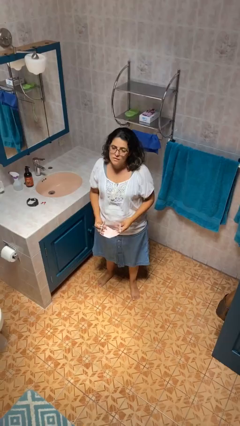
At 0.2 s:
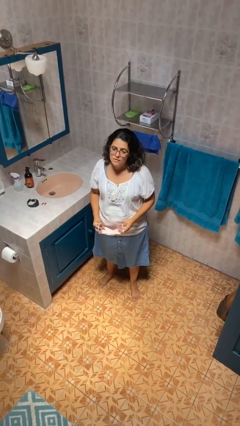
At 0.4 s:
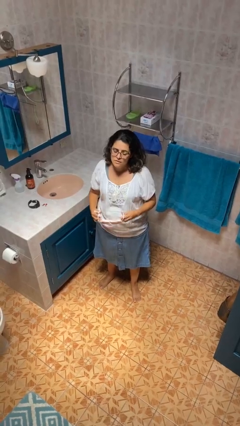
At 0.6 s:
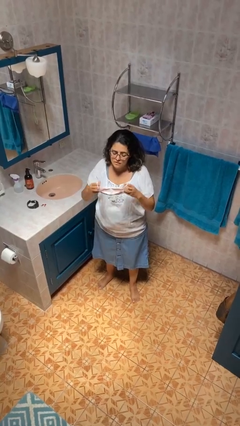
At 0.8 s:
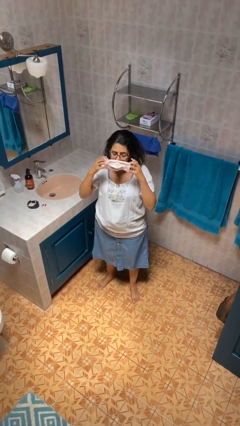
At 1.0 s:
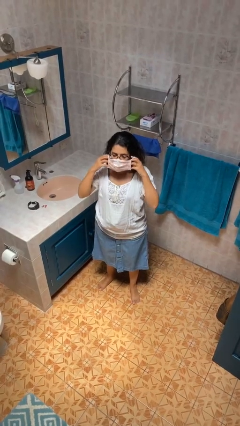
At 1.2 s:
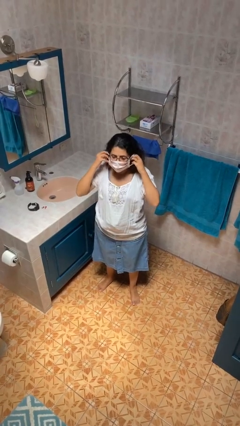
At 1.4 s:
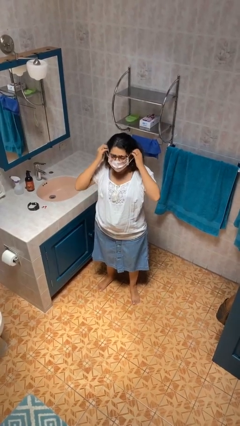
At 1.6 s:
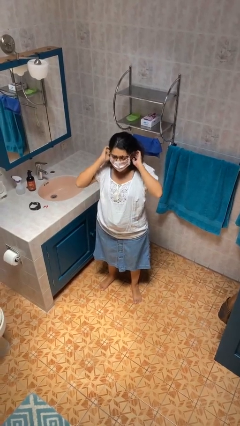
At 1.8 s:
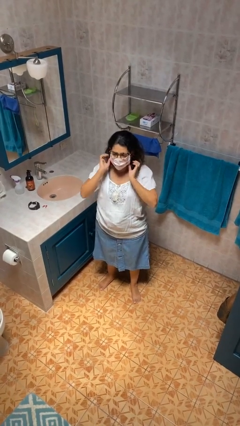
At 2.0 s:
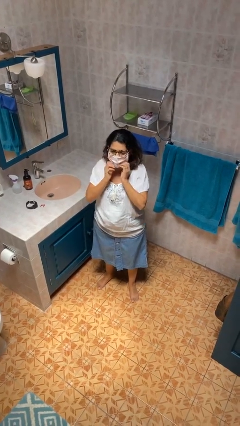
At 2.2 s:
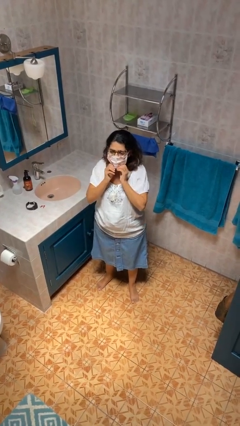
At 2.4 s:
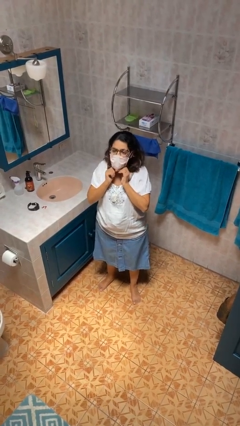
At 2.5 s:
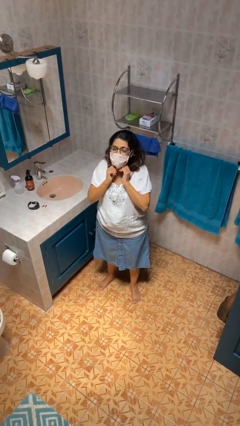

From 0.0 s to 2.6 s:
person puts on facemask

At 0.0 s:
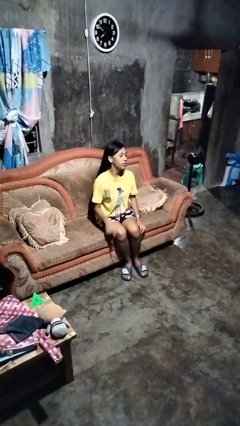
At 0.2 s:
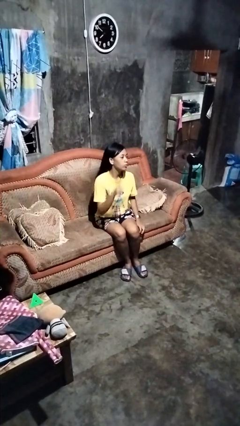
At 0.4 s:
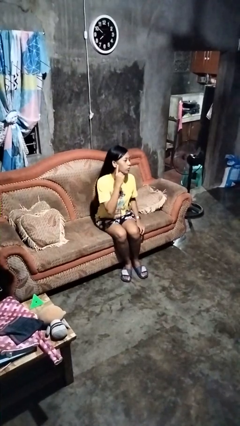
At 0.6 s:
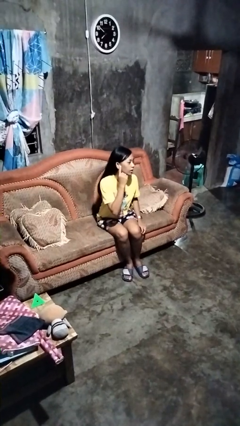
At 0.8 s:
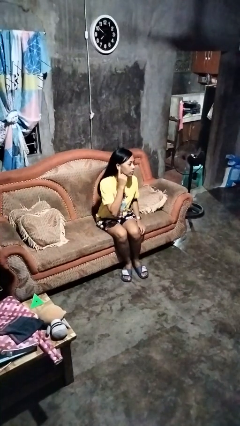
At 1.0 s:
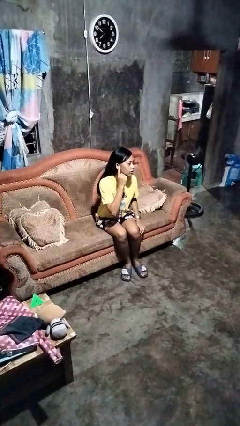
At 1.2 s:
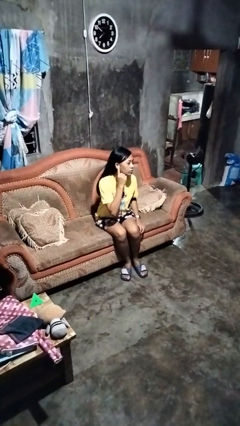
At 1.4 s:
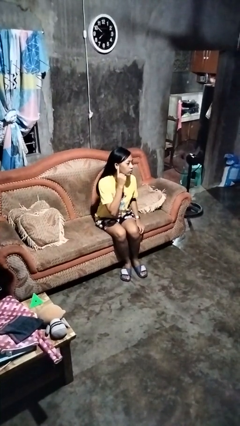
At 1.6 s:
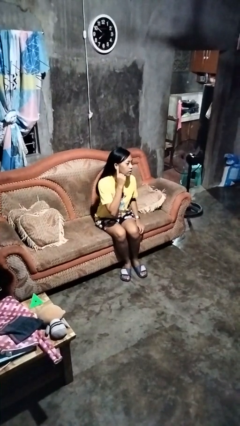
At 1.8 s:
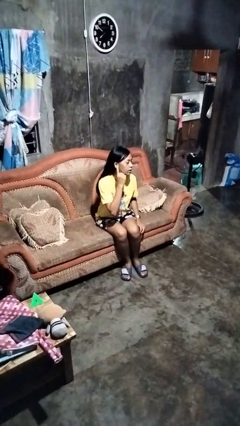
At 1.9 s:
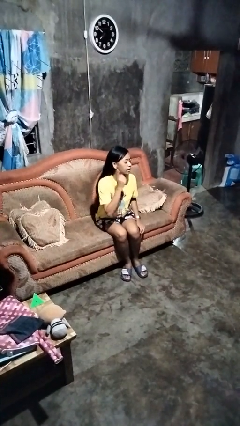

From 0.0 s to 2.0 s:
person gestures listen closely

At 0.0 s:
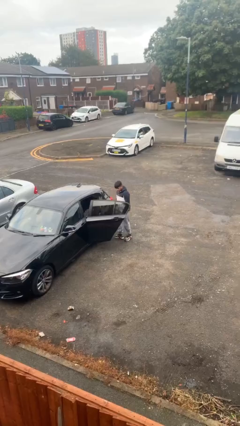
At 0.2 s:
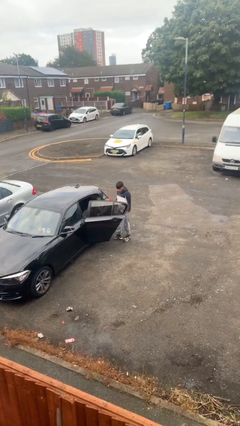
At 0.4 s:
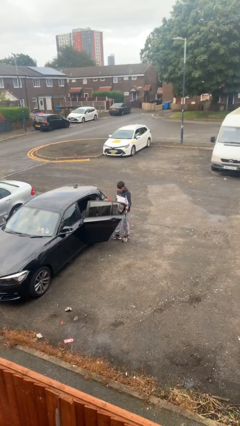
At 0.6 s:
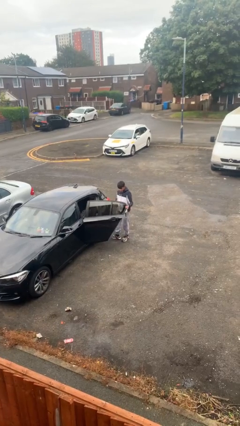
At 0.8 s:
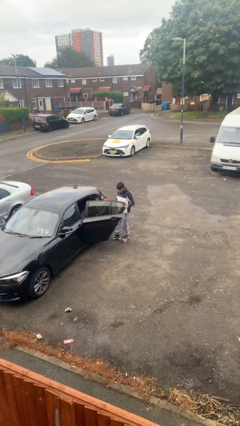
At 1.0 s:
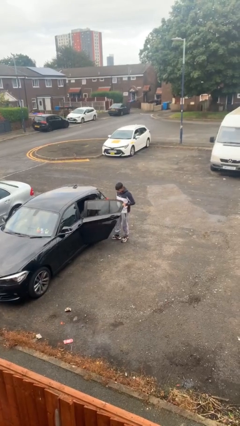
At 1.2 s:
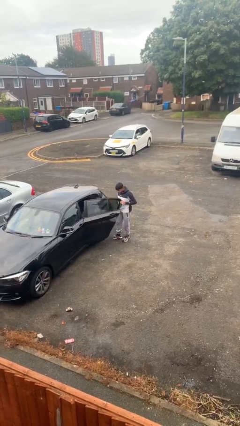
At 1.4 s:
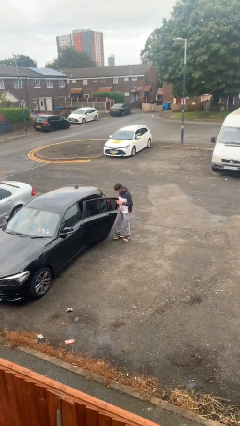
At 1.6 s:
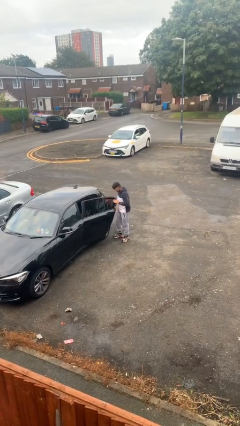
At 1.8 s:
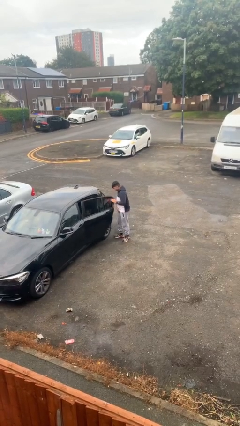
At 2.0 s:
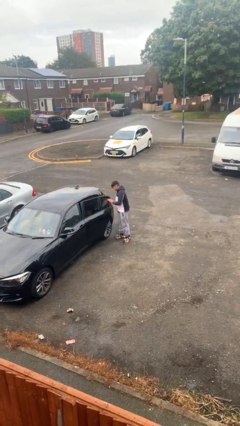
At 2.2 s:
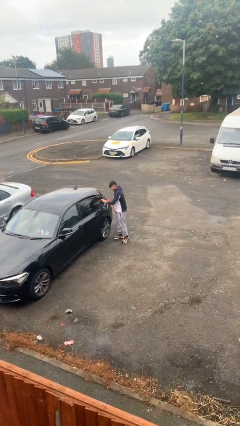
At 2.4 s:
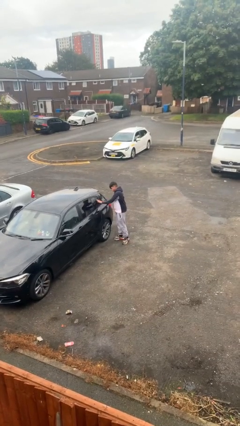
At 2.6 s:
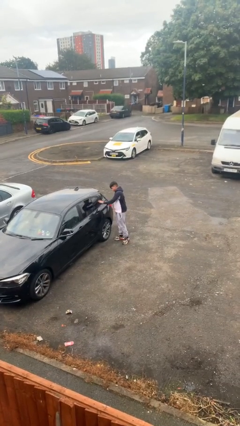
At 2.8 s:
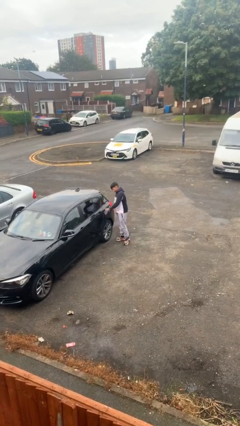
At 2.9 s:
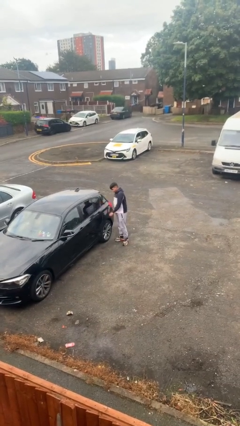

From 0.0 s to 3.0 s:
person closes car door

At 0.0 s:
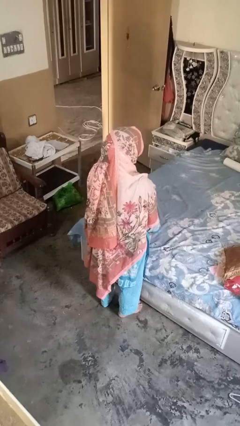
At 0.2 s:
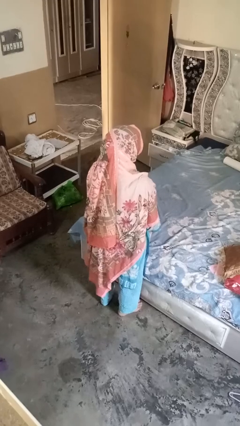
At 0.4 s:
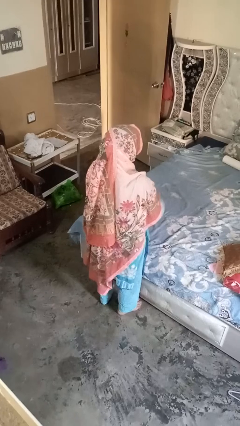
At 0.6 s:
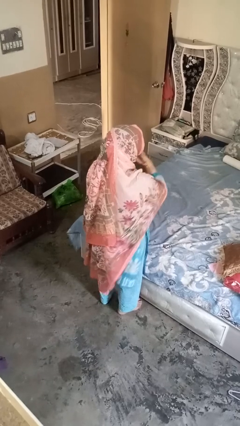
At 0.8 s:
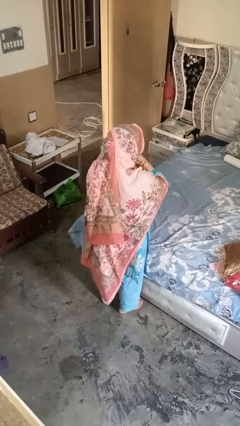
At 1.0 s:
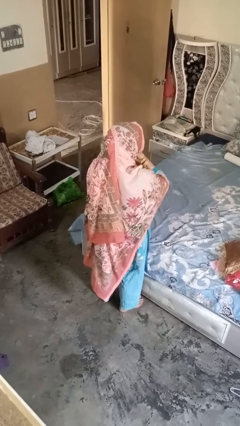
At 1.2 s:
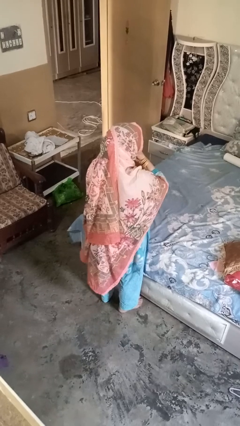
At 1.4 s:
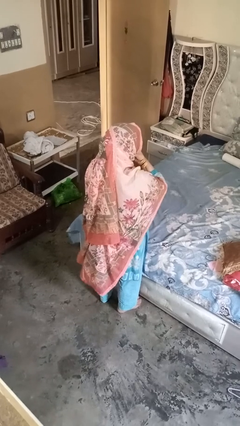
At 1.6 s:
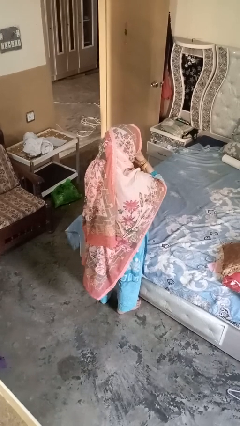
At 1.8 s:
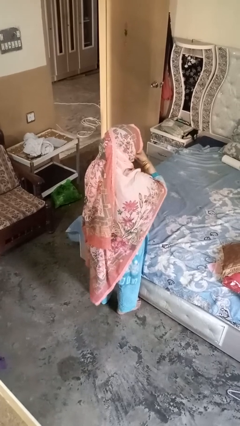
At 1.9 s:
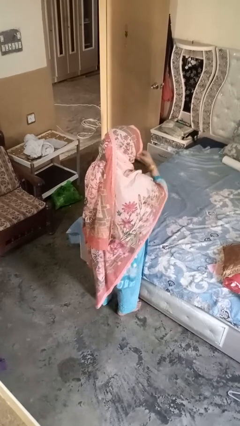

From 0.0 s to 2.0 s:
person strokes chin

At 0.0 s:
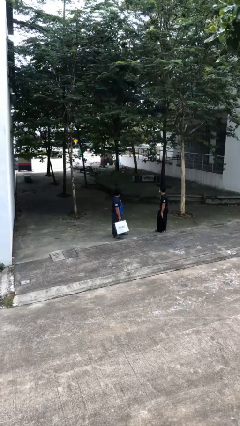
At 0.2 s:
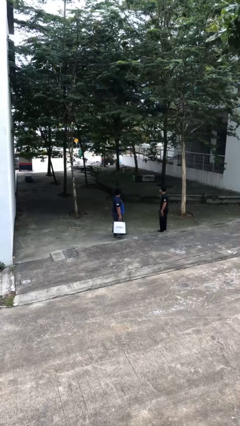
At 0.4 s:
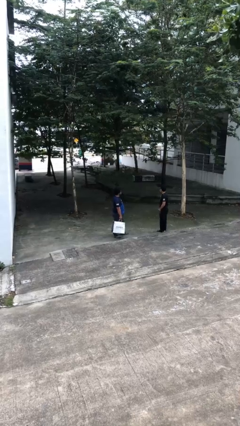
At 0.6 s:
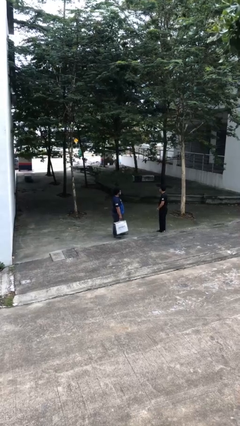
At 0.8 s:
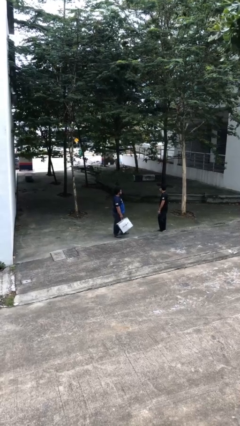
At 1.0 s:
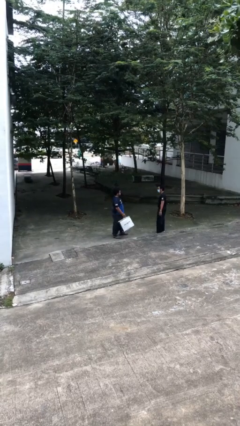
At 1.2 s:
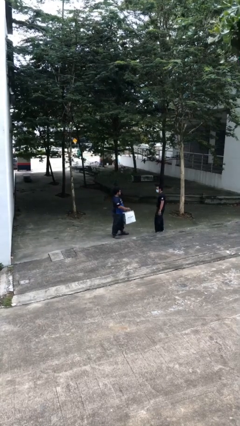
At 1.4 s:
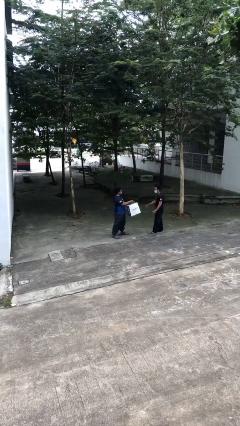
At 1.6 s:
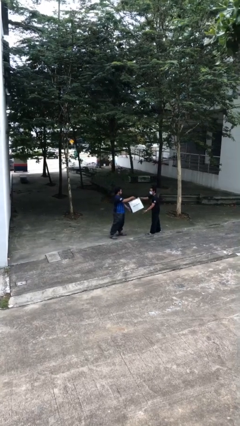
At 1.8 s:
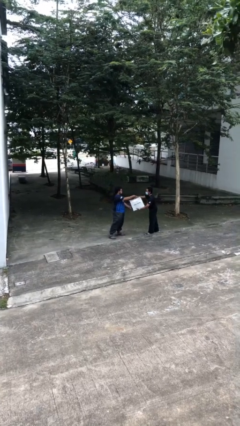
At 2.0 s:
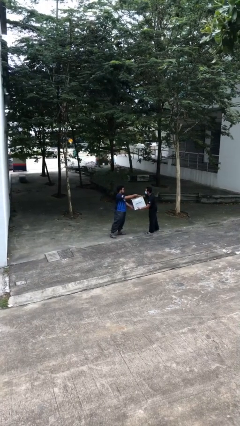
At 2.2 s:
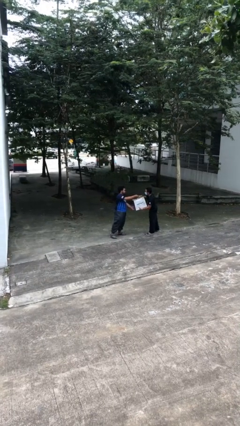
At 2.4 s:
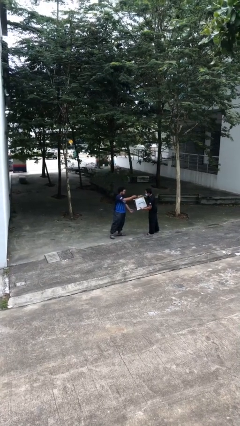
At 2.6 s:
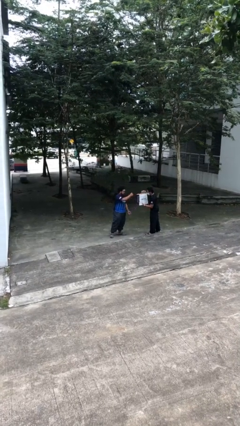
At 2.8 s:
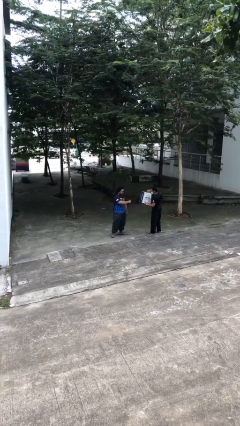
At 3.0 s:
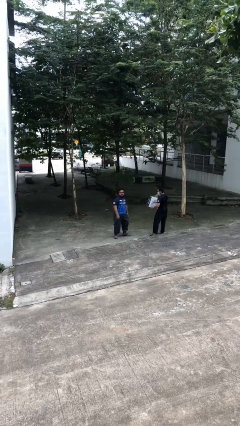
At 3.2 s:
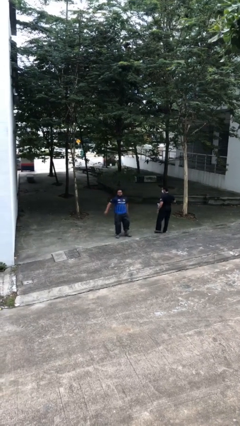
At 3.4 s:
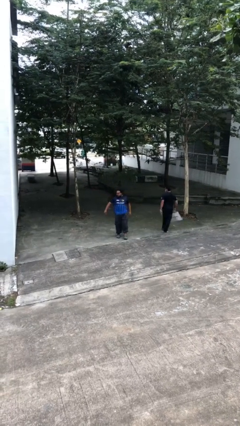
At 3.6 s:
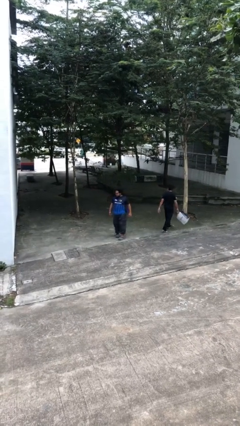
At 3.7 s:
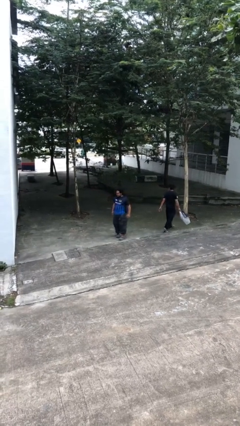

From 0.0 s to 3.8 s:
person transfers object to person

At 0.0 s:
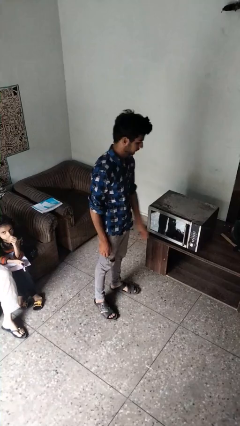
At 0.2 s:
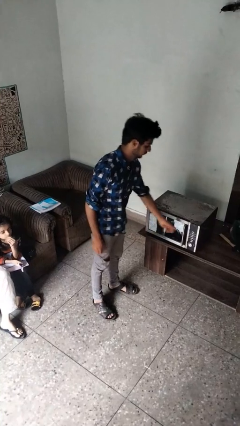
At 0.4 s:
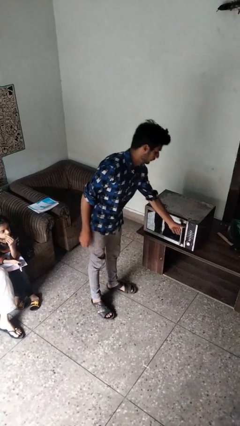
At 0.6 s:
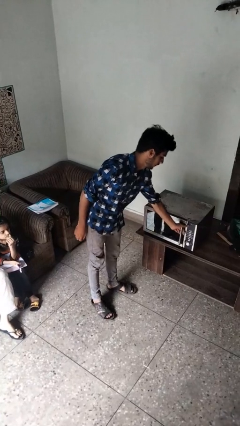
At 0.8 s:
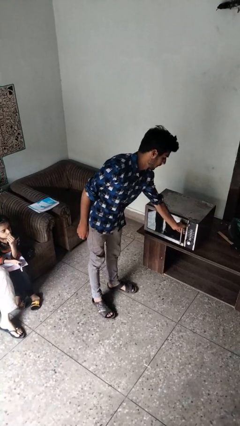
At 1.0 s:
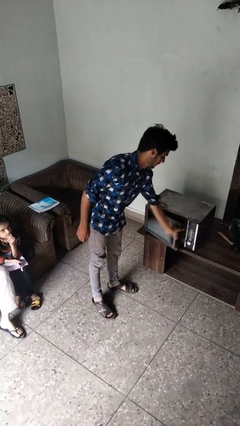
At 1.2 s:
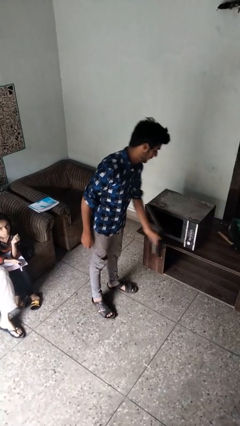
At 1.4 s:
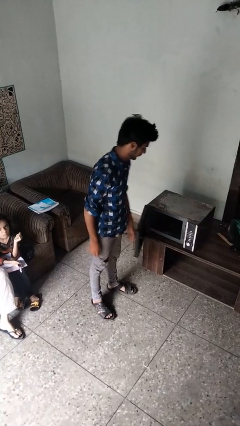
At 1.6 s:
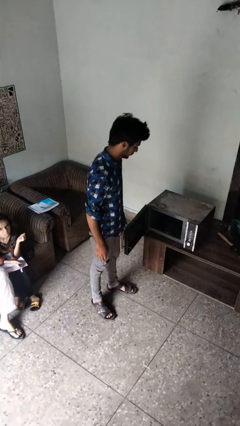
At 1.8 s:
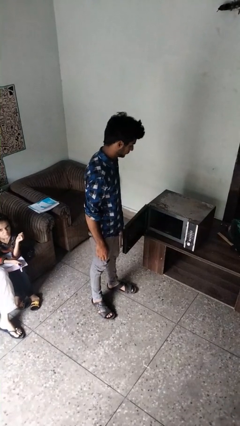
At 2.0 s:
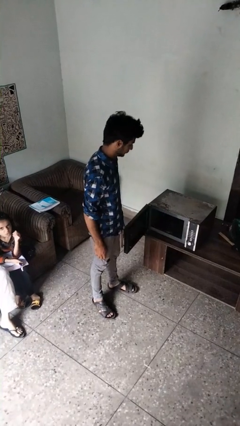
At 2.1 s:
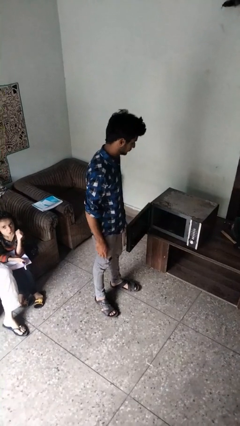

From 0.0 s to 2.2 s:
person opens microwave

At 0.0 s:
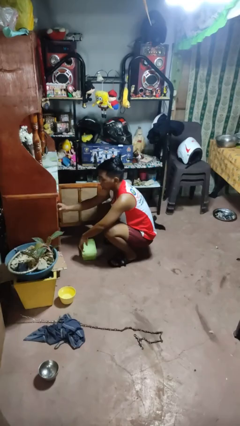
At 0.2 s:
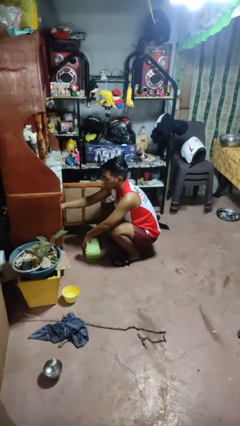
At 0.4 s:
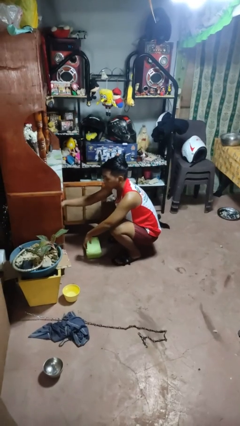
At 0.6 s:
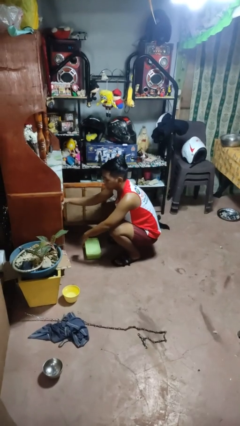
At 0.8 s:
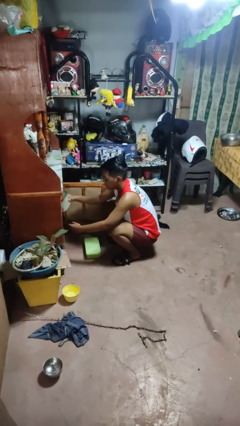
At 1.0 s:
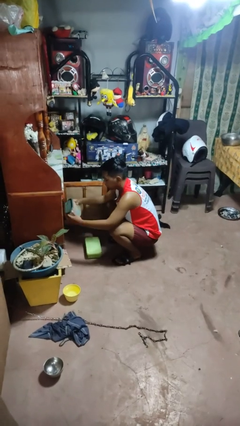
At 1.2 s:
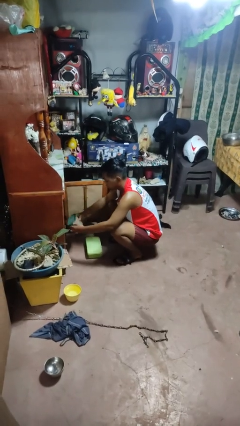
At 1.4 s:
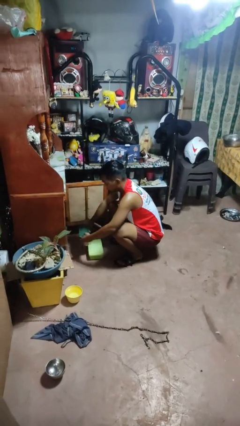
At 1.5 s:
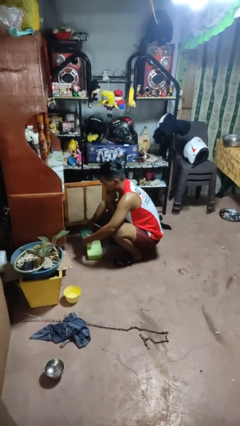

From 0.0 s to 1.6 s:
person takes object from cabinet
